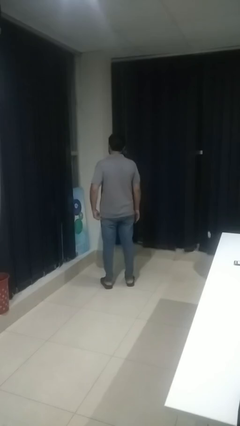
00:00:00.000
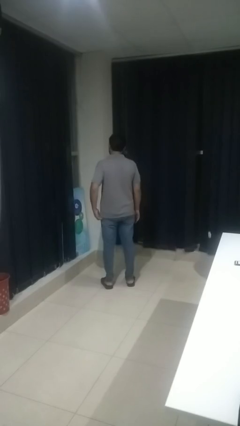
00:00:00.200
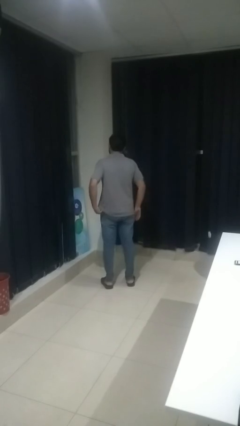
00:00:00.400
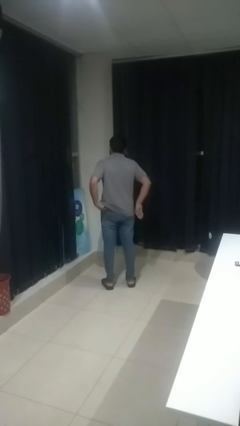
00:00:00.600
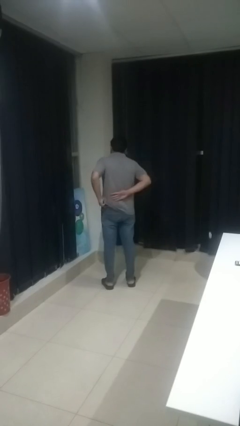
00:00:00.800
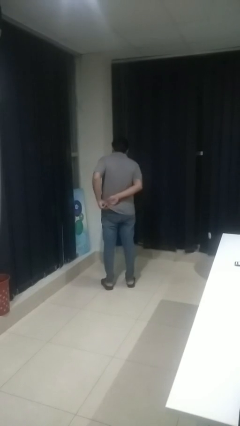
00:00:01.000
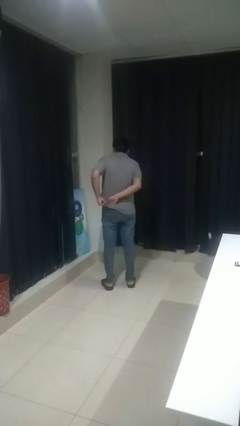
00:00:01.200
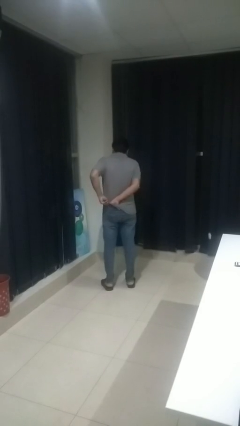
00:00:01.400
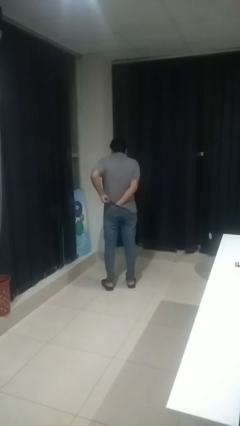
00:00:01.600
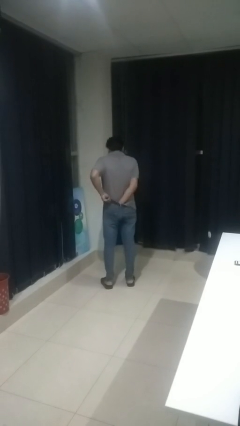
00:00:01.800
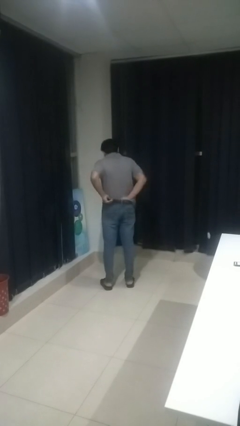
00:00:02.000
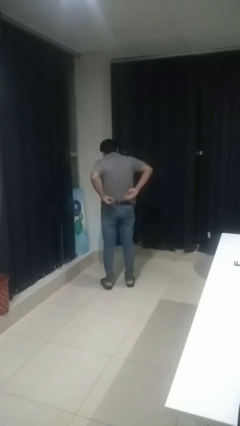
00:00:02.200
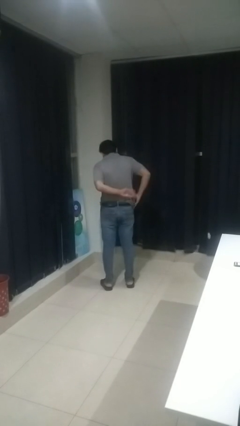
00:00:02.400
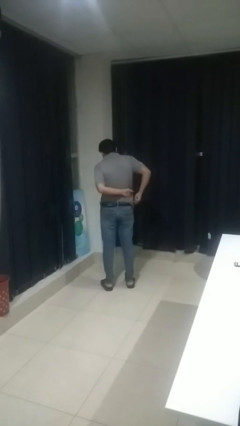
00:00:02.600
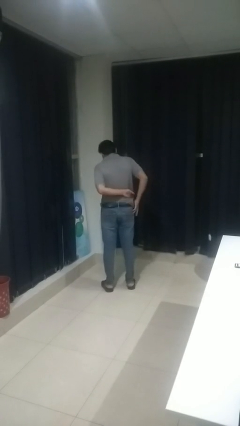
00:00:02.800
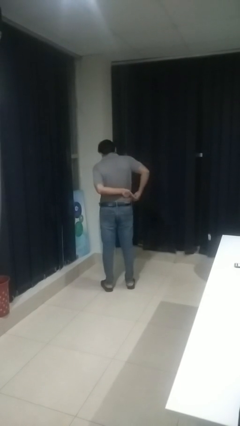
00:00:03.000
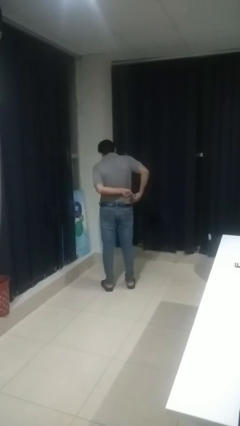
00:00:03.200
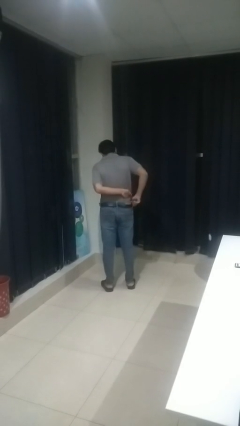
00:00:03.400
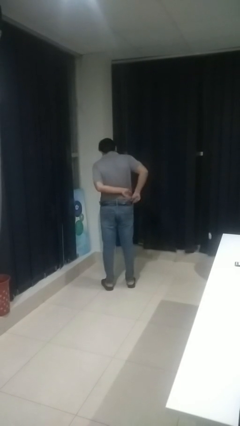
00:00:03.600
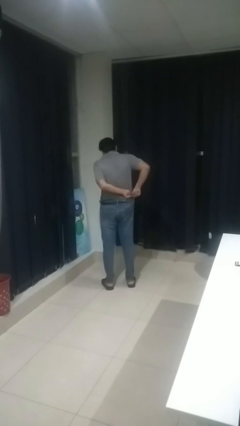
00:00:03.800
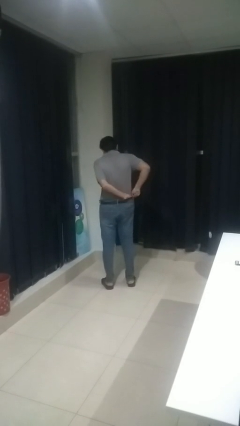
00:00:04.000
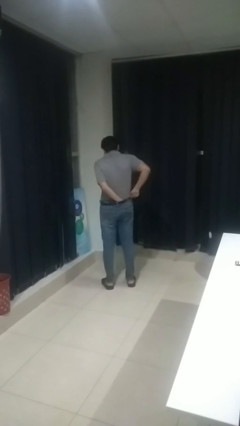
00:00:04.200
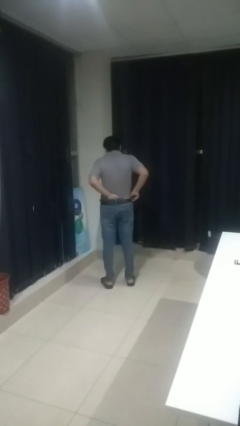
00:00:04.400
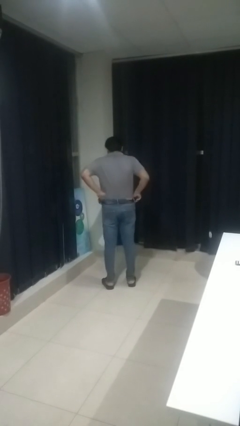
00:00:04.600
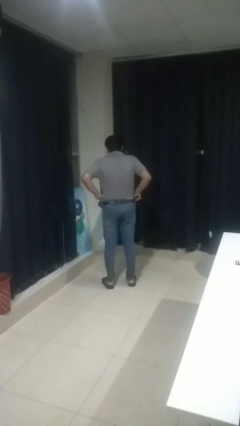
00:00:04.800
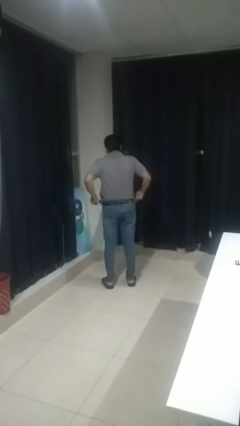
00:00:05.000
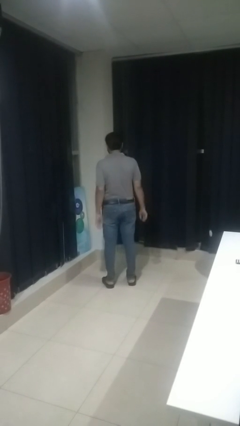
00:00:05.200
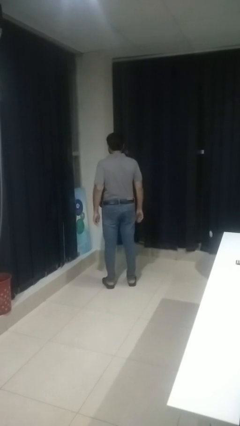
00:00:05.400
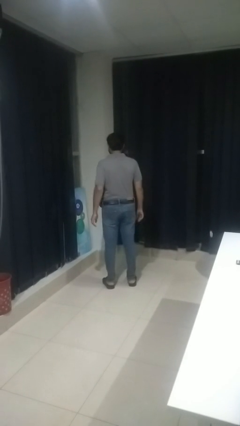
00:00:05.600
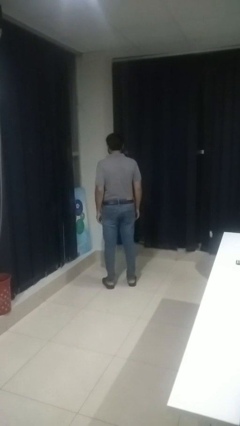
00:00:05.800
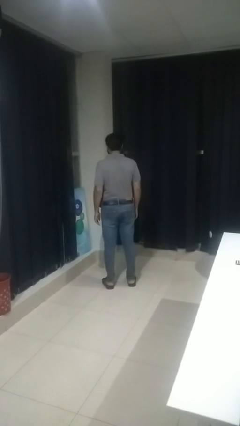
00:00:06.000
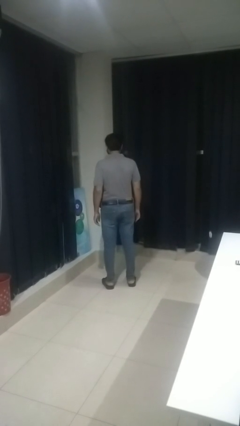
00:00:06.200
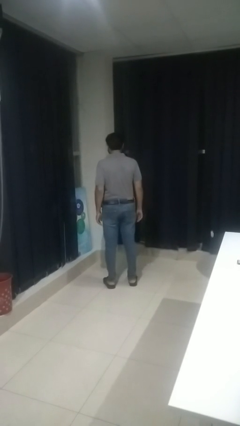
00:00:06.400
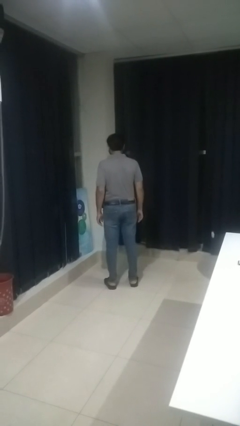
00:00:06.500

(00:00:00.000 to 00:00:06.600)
person tucks in shirt

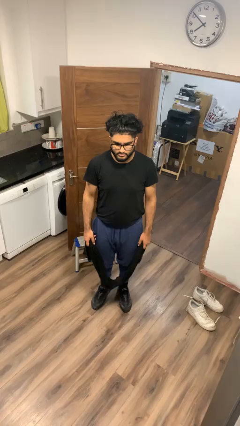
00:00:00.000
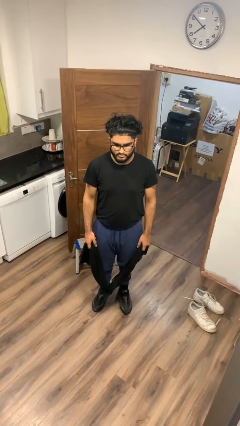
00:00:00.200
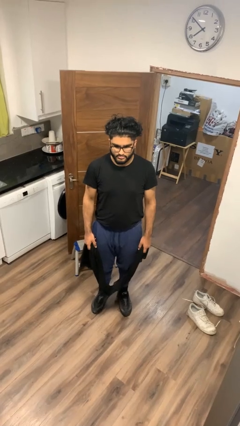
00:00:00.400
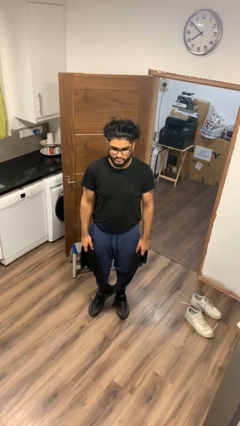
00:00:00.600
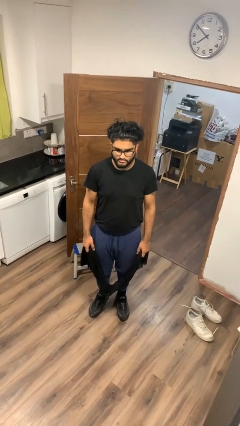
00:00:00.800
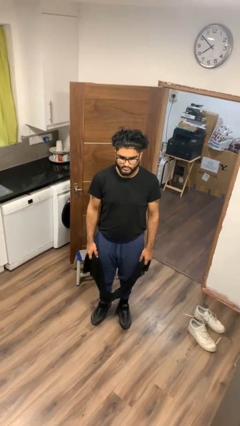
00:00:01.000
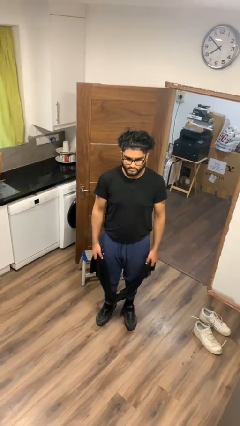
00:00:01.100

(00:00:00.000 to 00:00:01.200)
person puts on scarf

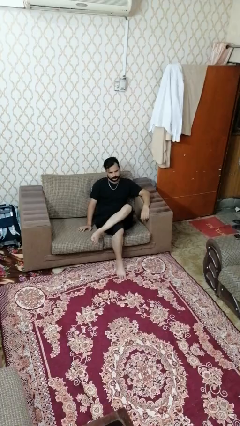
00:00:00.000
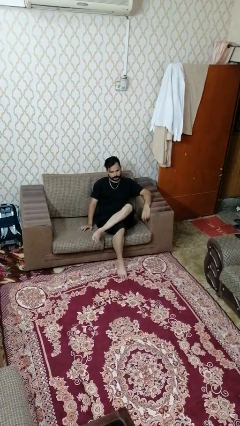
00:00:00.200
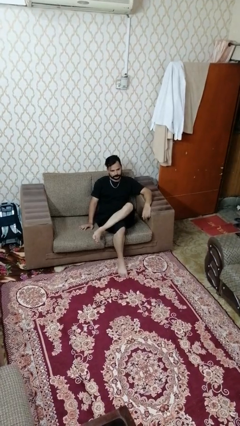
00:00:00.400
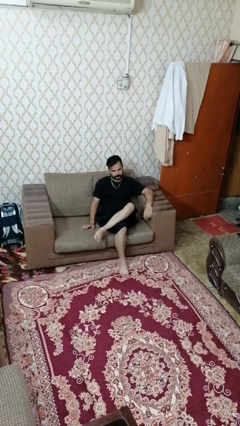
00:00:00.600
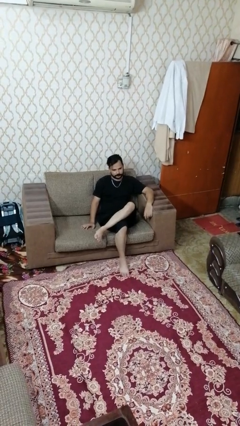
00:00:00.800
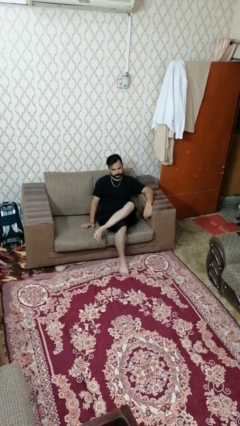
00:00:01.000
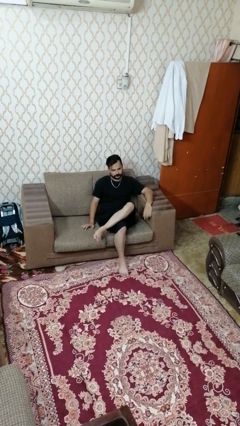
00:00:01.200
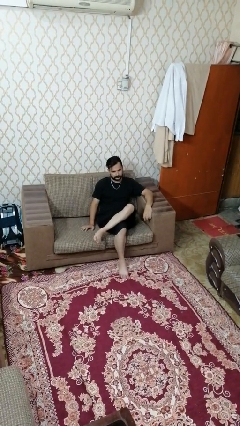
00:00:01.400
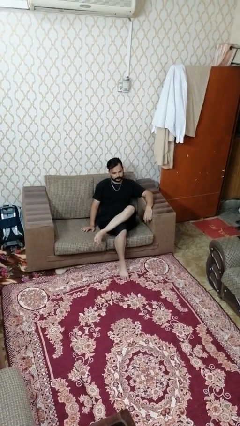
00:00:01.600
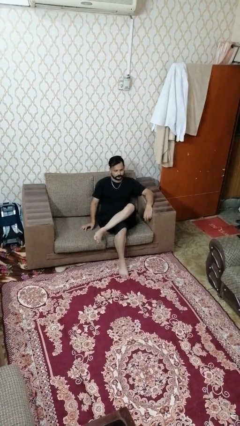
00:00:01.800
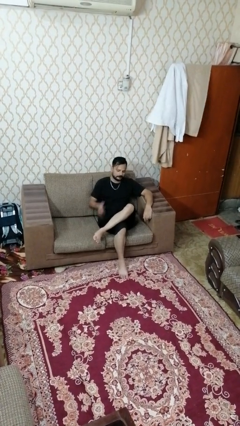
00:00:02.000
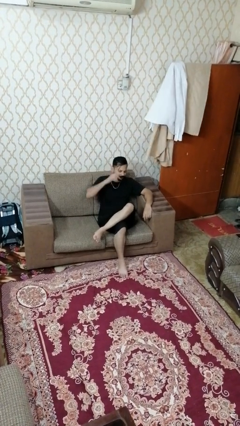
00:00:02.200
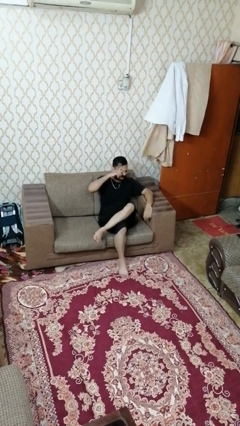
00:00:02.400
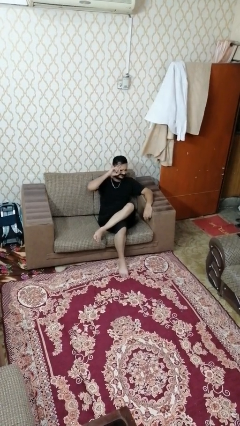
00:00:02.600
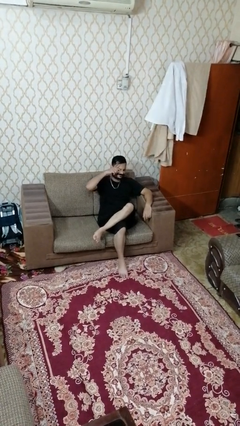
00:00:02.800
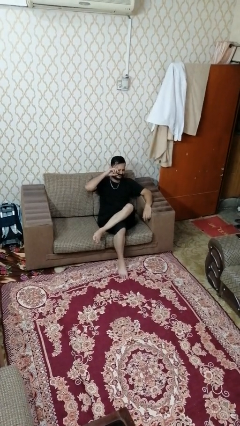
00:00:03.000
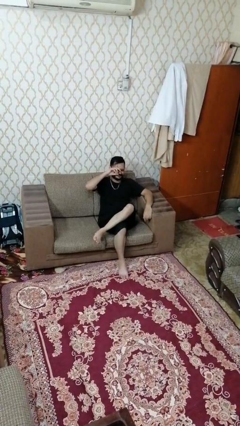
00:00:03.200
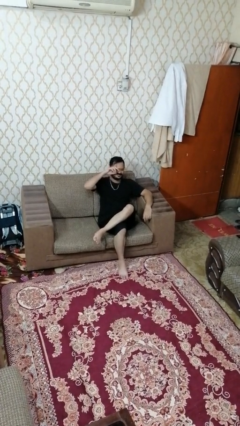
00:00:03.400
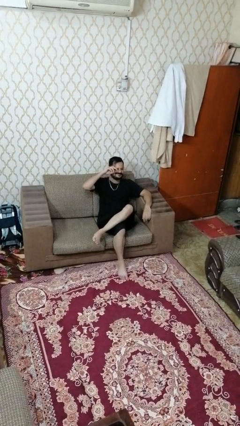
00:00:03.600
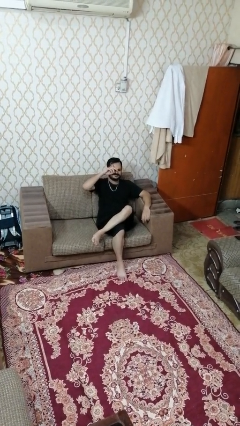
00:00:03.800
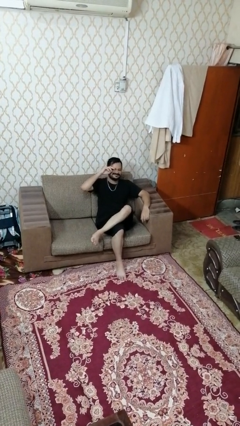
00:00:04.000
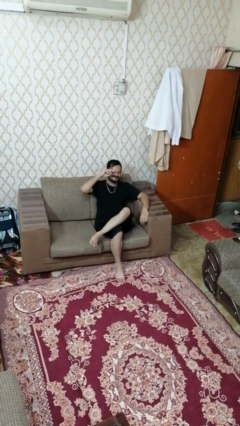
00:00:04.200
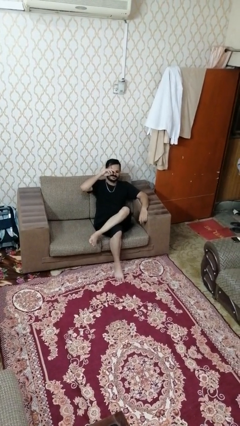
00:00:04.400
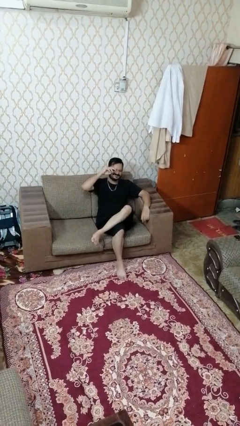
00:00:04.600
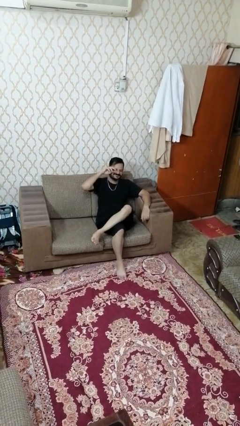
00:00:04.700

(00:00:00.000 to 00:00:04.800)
person rubs eyes

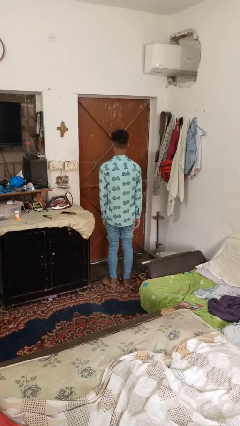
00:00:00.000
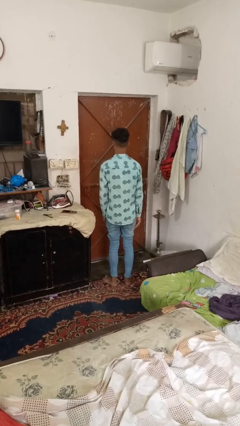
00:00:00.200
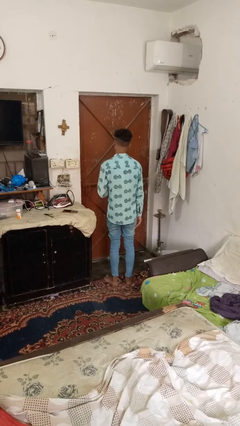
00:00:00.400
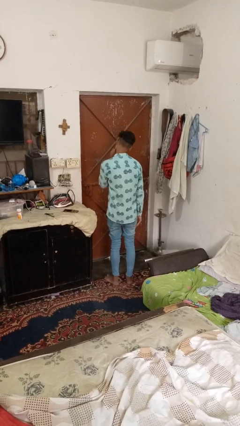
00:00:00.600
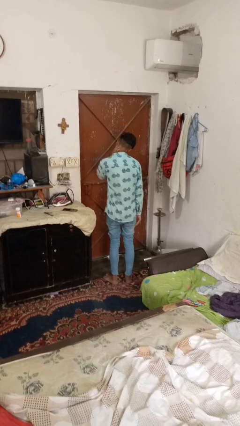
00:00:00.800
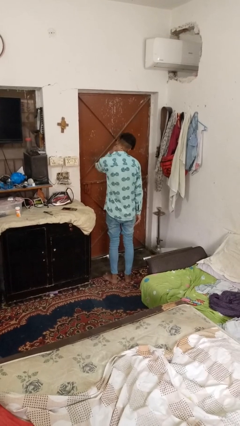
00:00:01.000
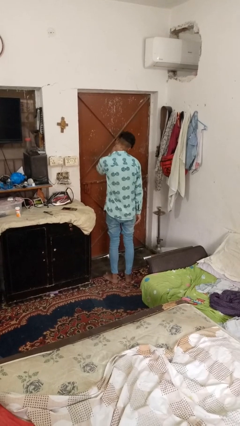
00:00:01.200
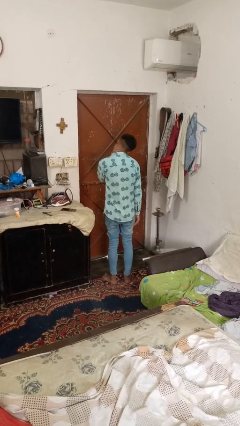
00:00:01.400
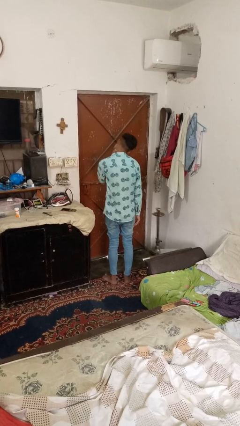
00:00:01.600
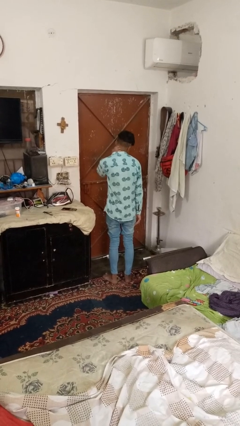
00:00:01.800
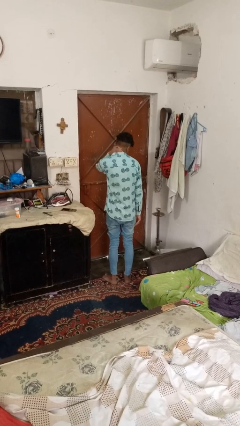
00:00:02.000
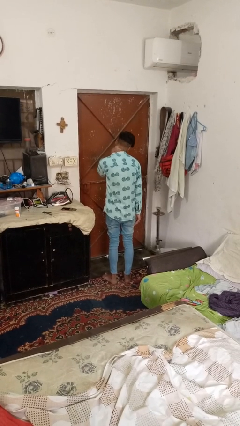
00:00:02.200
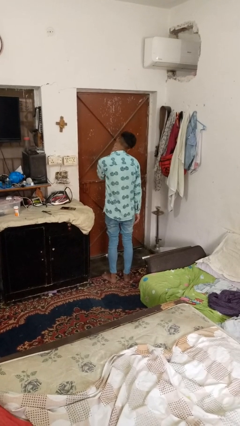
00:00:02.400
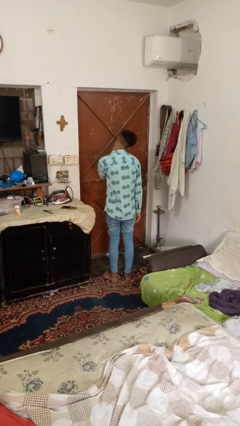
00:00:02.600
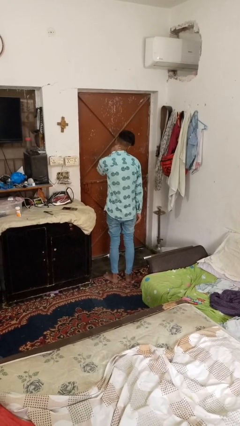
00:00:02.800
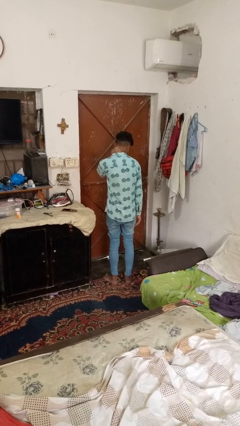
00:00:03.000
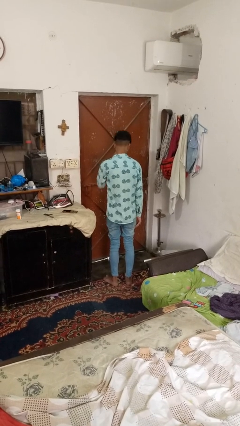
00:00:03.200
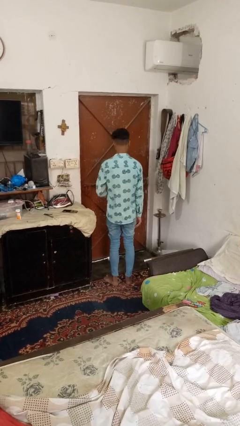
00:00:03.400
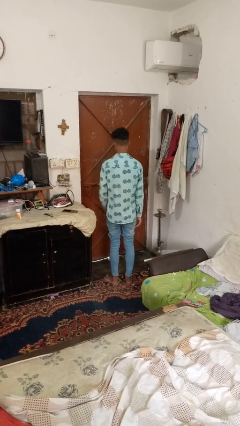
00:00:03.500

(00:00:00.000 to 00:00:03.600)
person rubs neck

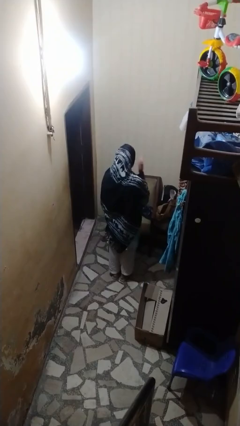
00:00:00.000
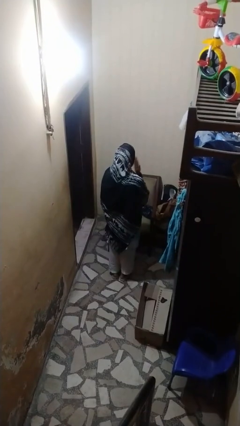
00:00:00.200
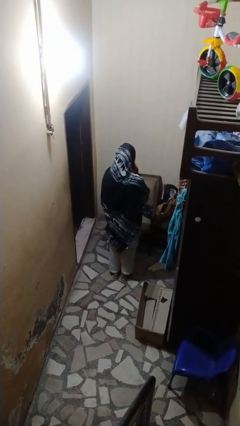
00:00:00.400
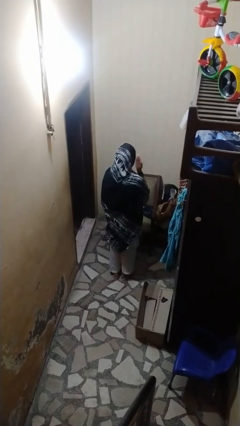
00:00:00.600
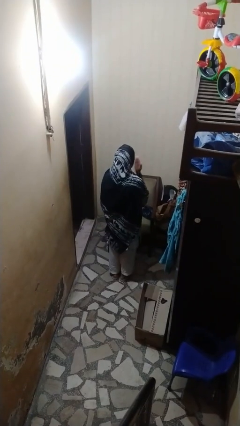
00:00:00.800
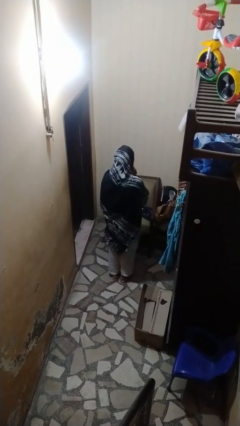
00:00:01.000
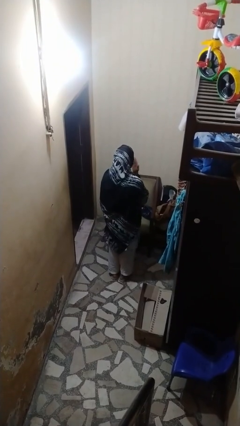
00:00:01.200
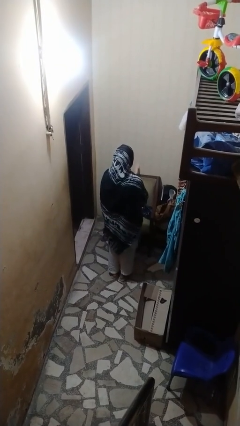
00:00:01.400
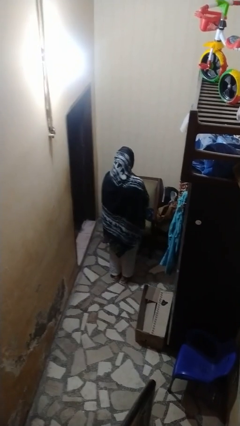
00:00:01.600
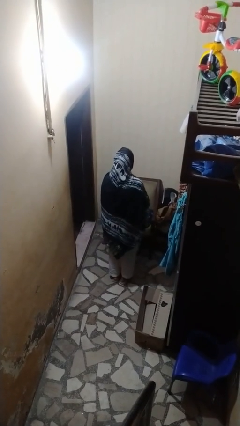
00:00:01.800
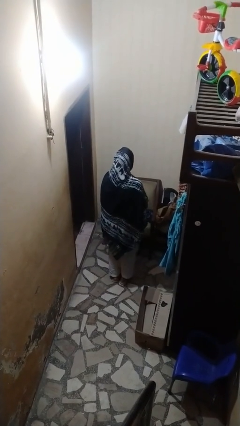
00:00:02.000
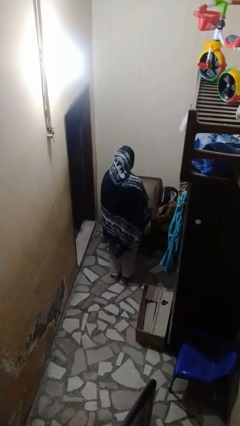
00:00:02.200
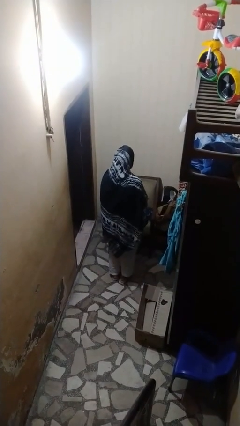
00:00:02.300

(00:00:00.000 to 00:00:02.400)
person gestures blow kiss
